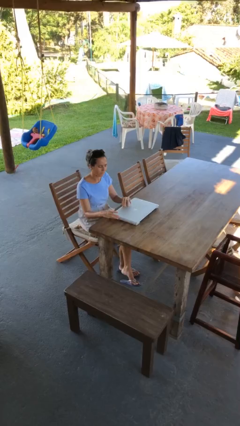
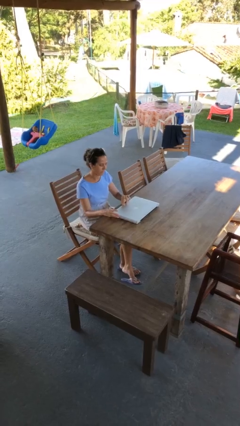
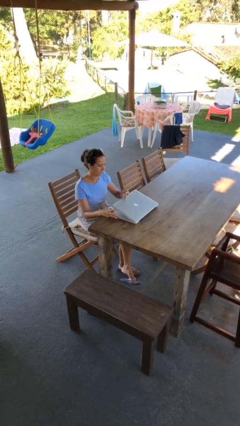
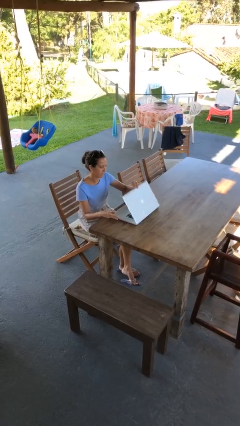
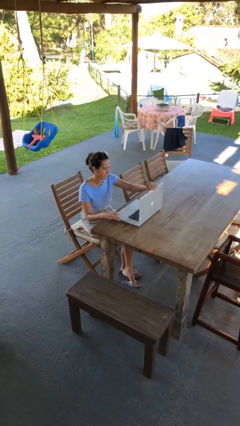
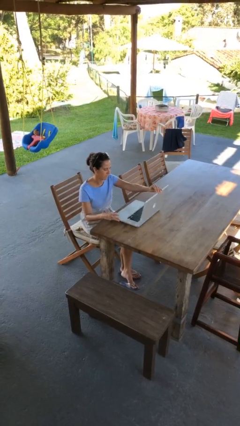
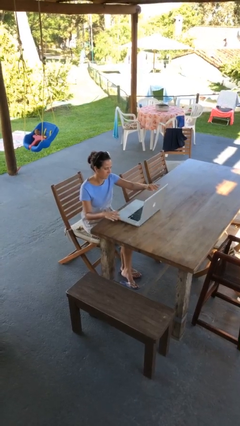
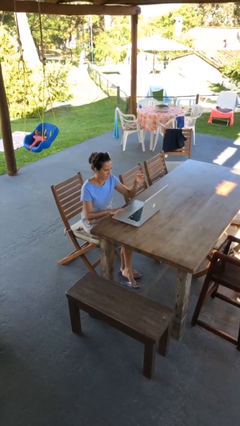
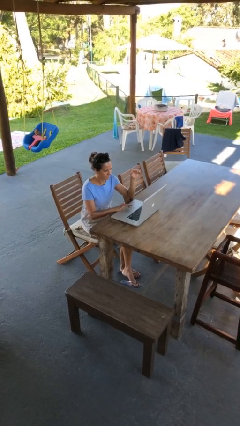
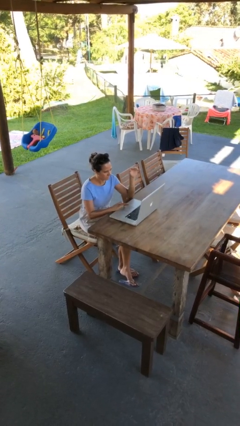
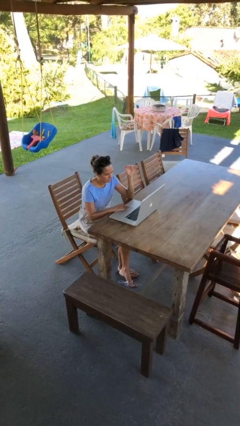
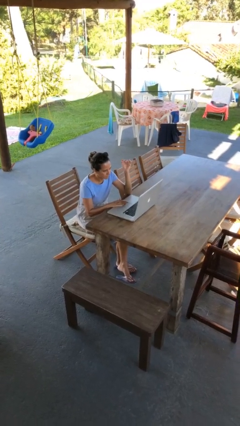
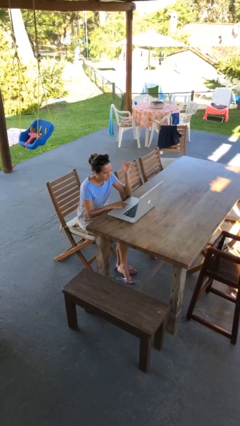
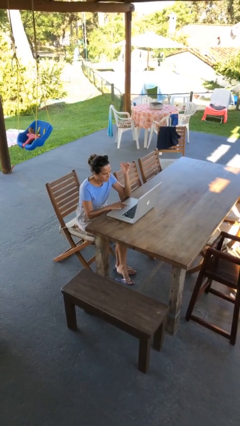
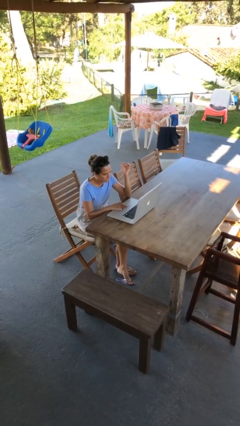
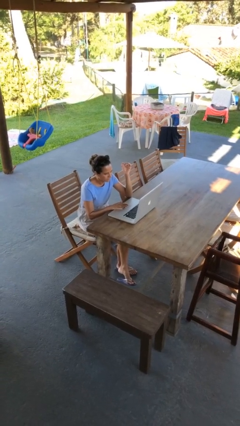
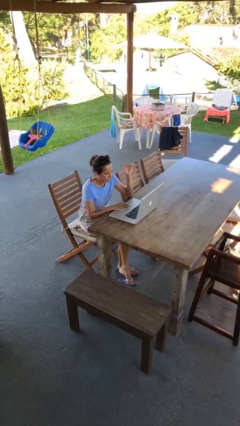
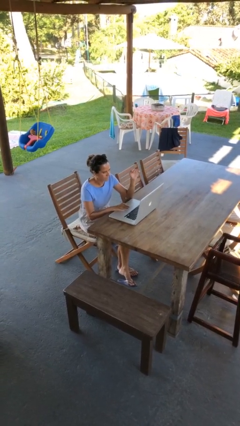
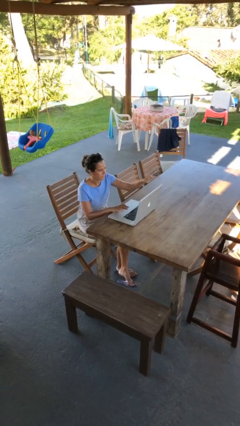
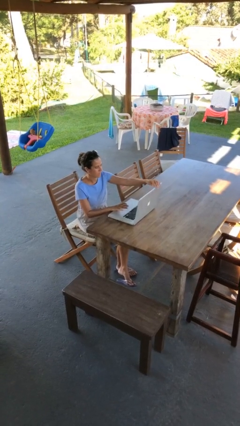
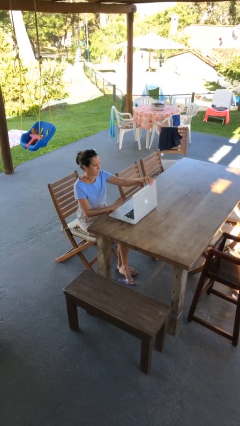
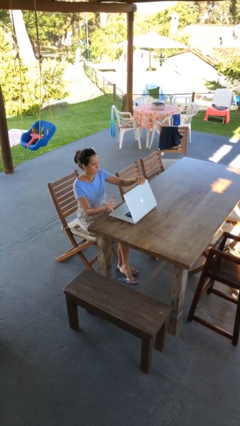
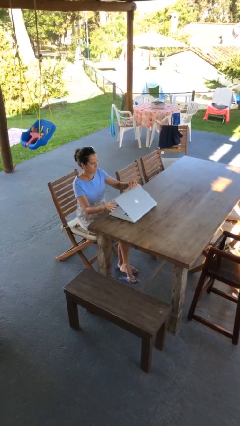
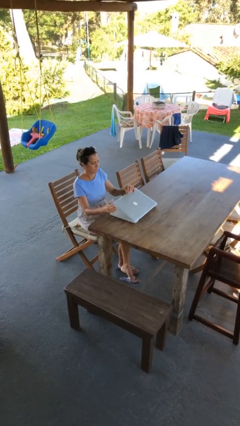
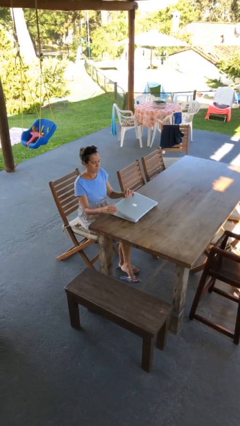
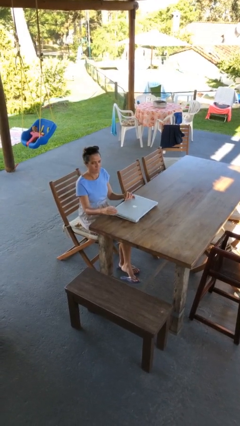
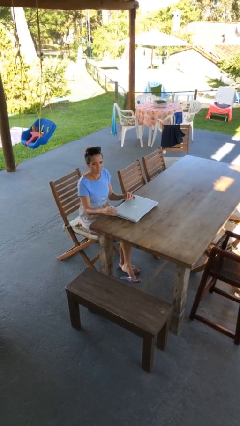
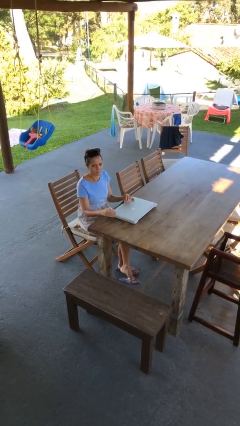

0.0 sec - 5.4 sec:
person interacts with laptop

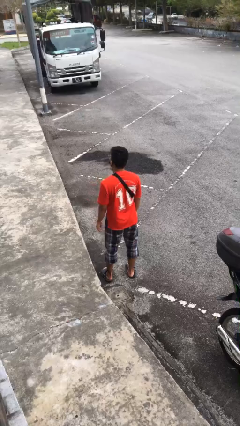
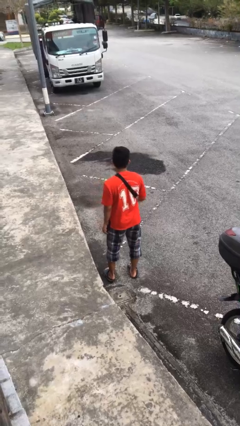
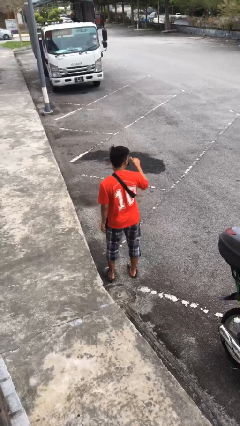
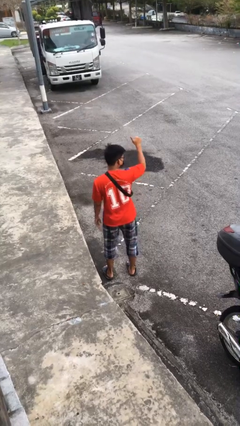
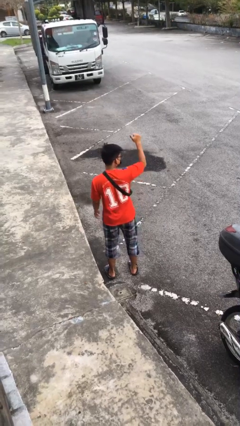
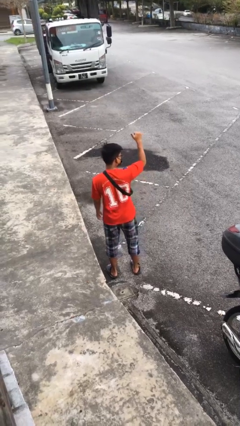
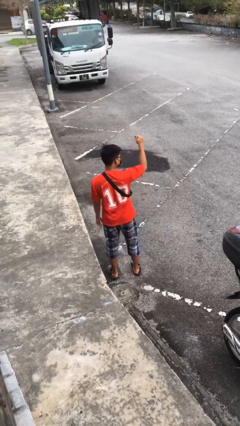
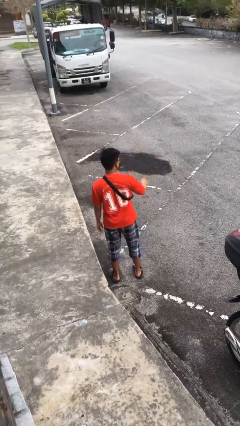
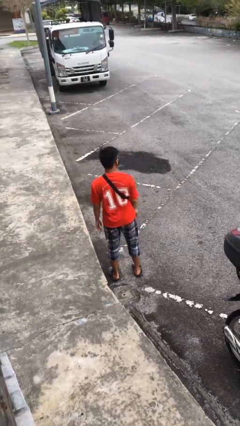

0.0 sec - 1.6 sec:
person gestures thumbs up

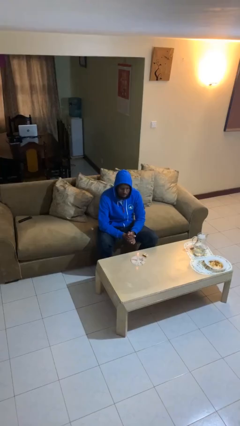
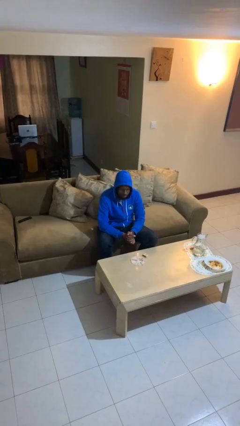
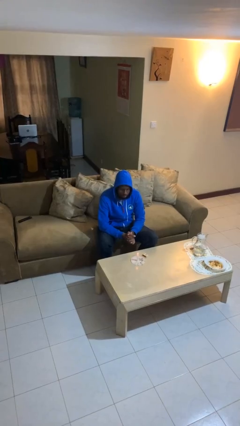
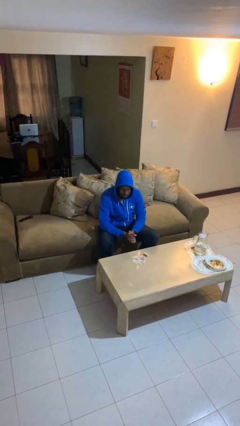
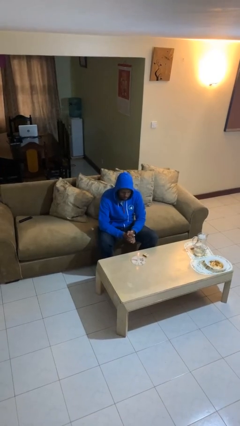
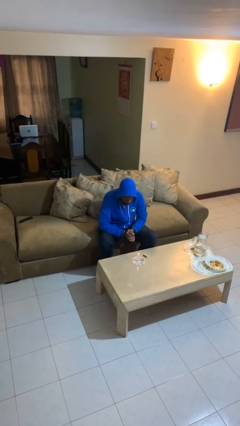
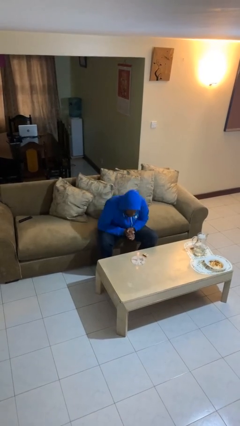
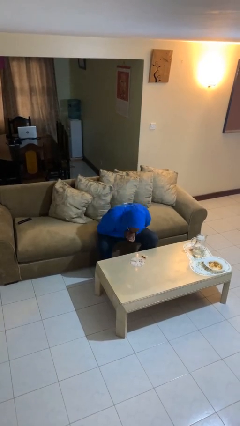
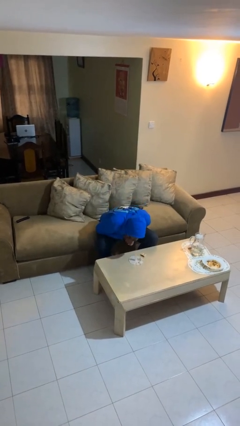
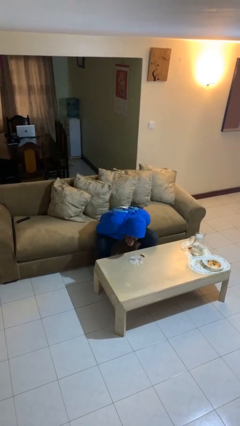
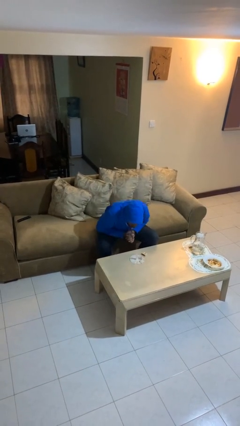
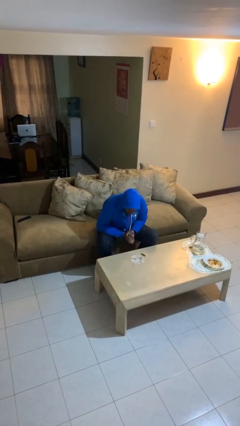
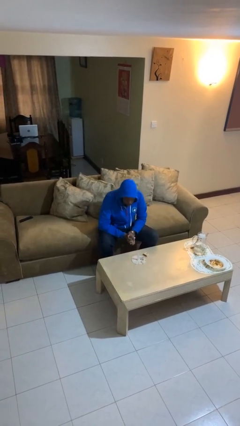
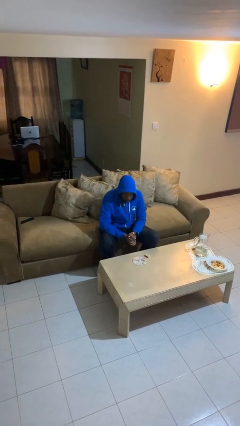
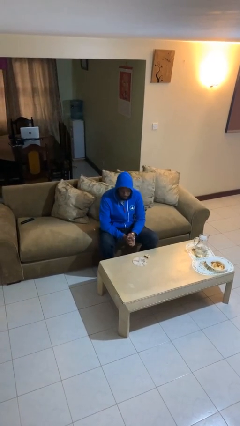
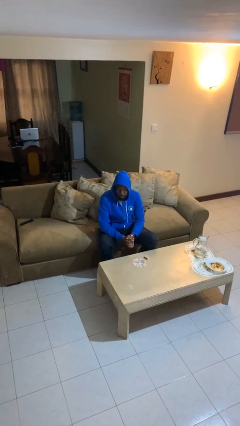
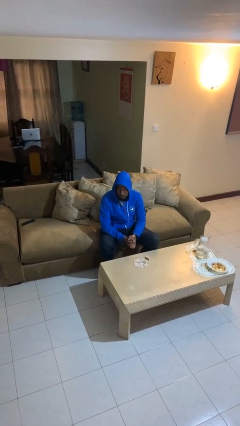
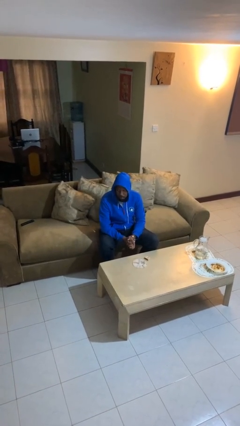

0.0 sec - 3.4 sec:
person extinguishes candle

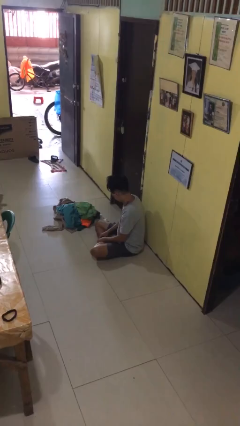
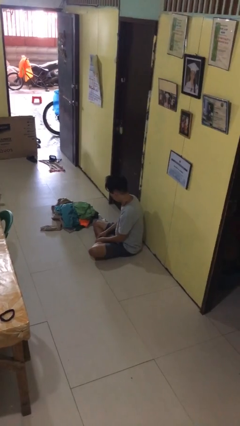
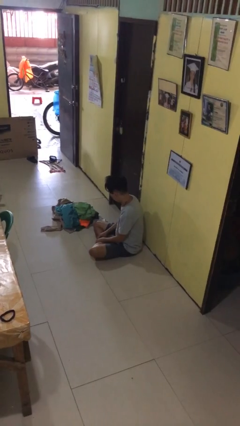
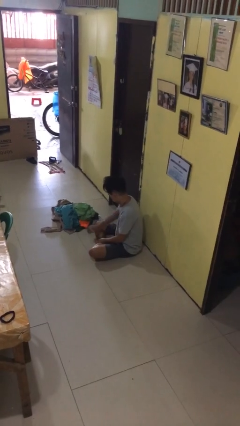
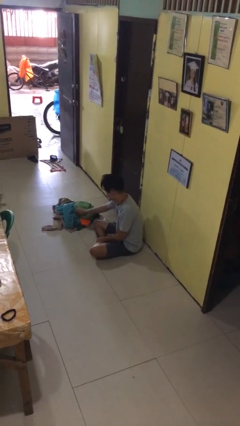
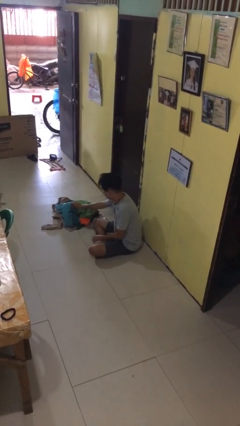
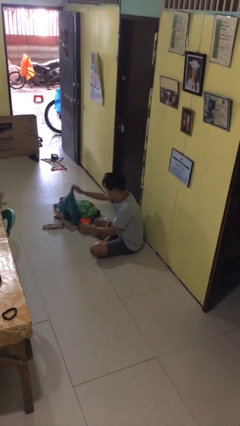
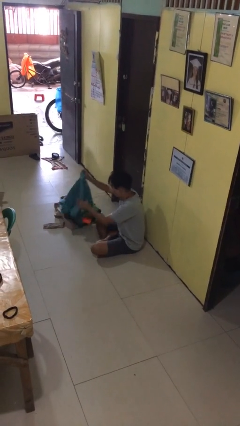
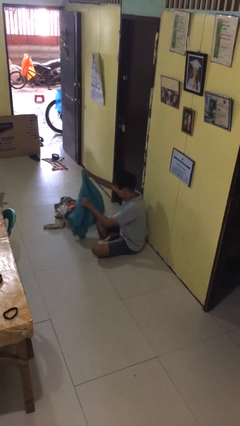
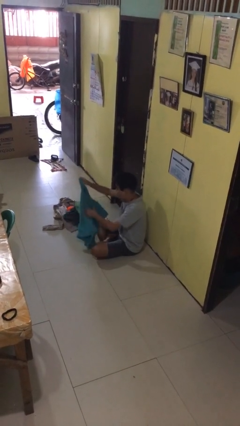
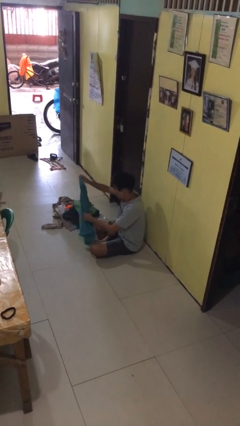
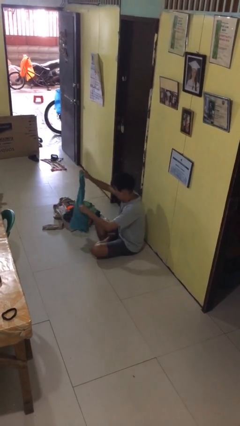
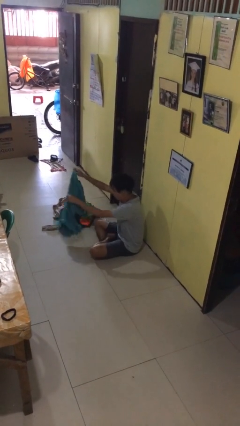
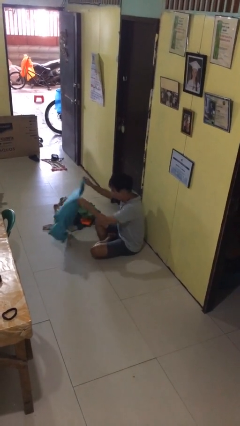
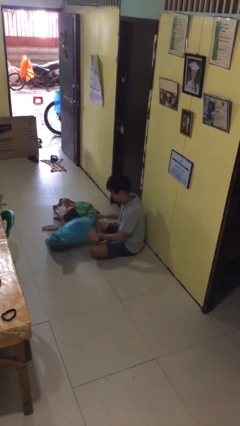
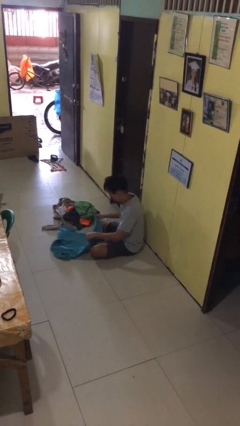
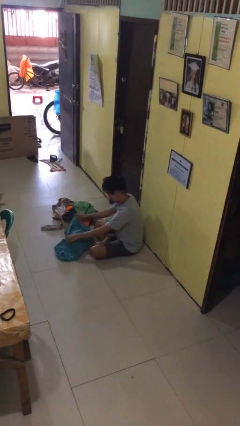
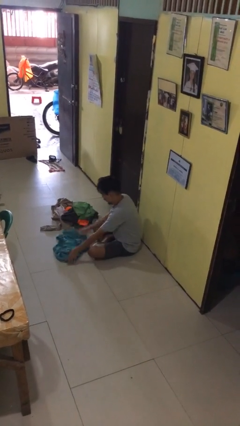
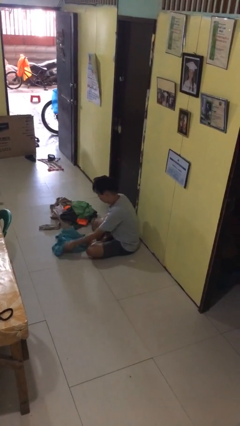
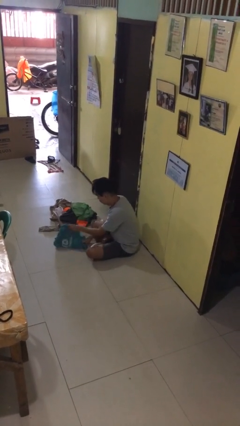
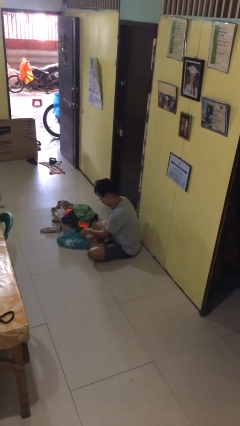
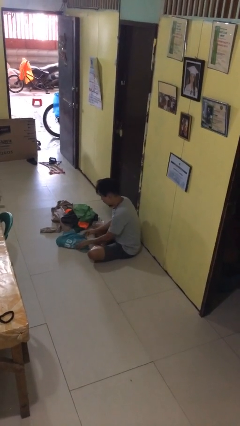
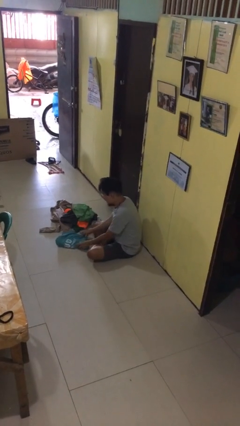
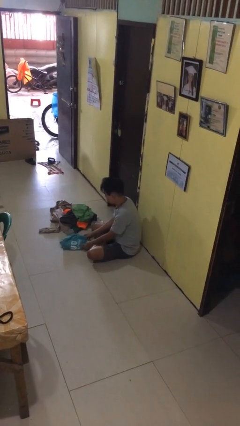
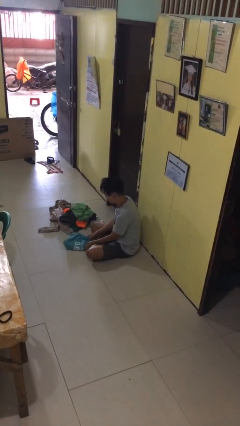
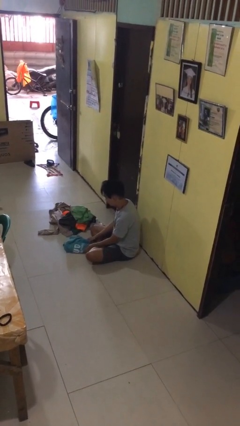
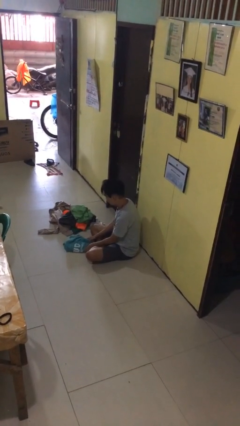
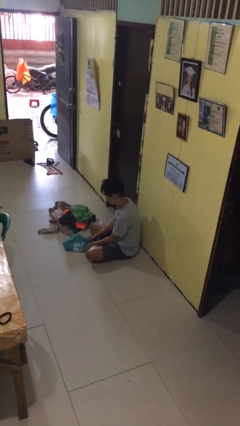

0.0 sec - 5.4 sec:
person folds shirt

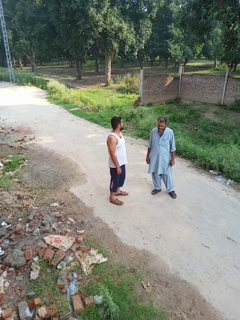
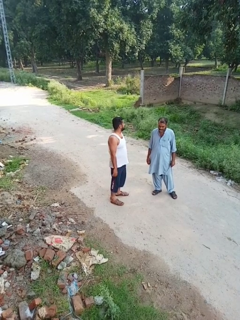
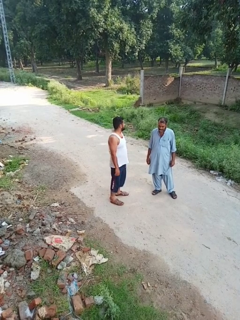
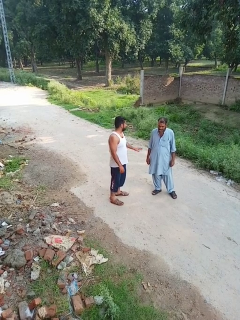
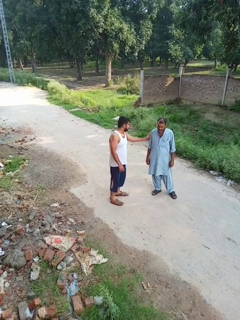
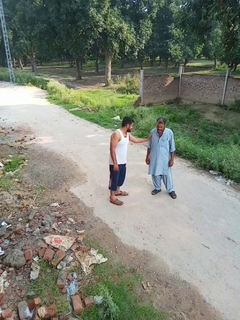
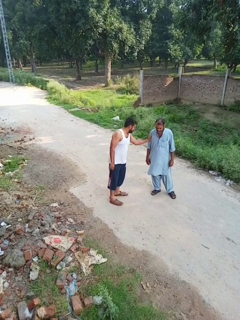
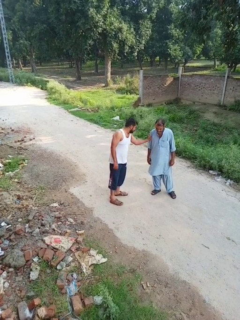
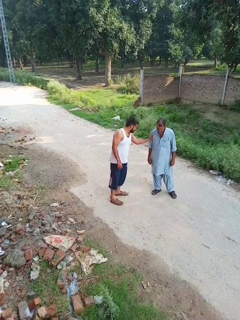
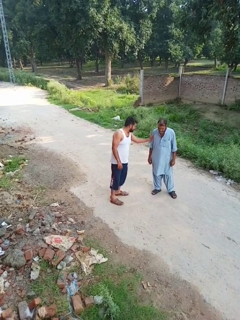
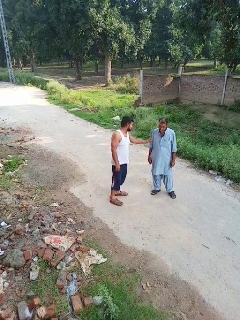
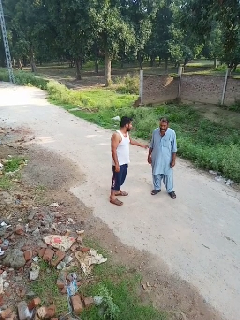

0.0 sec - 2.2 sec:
person grabs person by forearm
